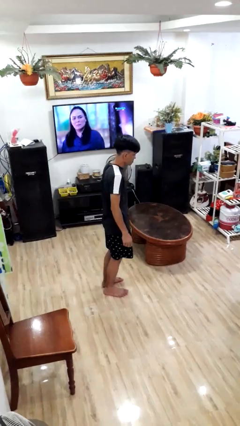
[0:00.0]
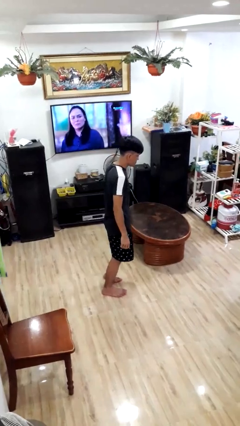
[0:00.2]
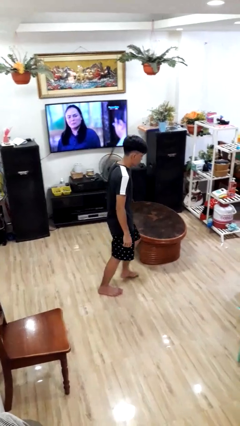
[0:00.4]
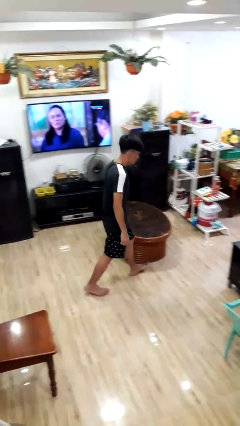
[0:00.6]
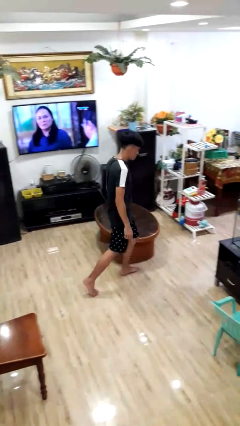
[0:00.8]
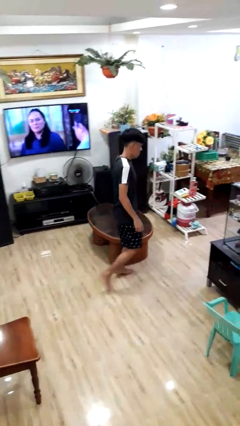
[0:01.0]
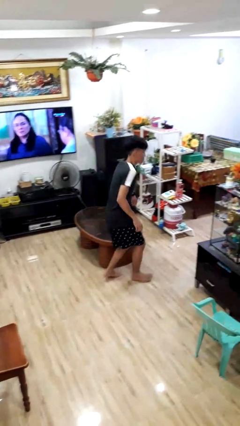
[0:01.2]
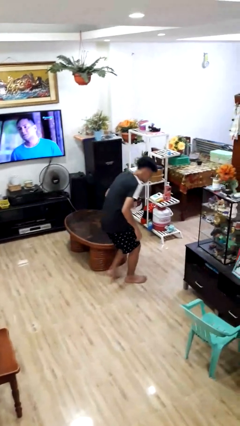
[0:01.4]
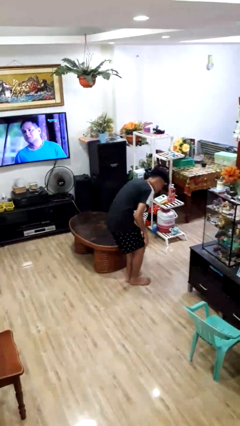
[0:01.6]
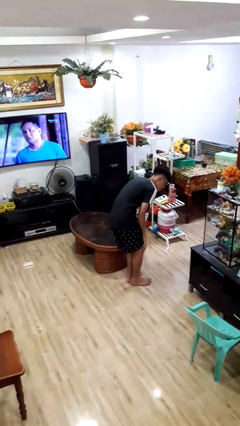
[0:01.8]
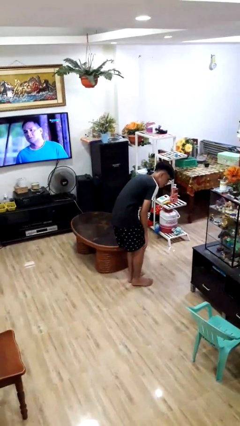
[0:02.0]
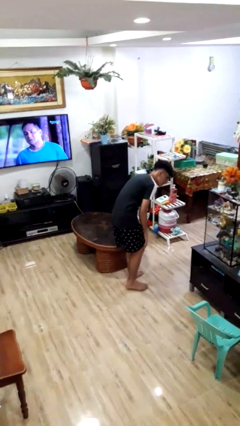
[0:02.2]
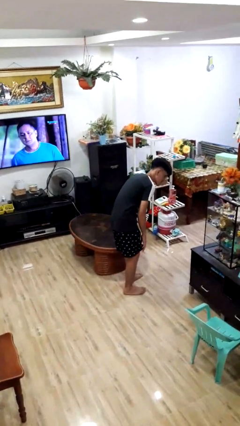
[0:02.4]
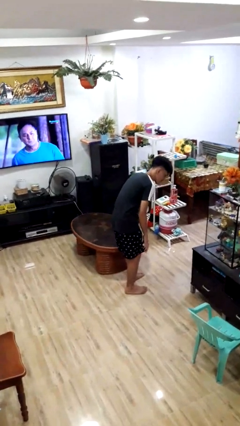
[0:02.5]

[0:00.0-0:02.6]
person bumps into table

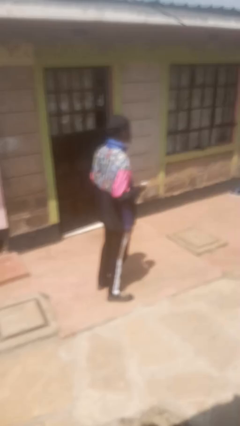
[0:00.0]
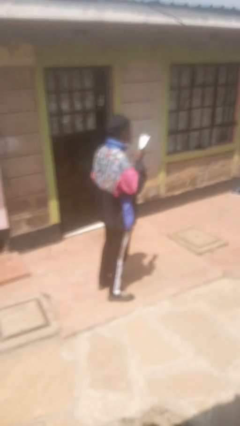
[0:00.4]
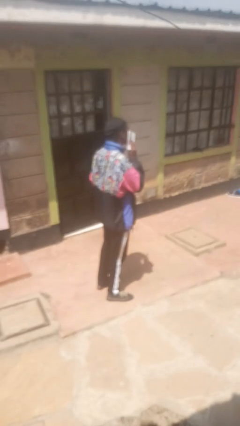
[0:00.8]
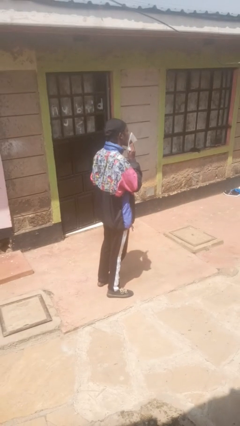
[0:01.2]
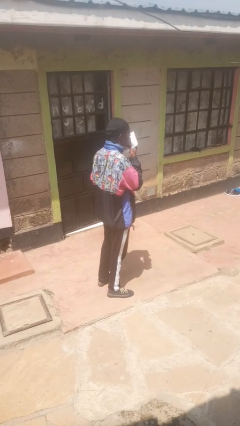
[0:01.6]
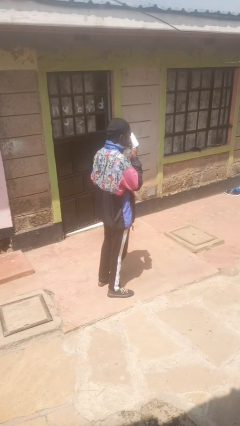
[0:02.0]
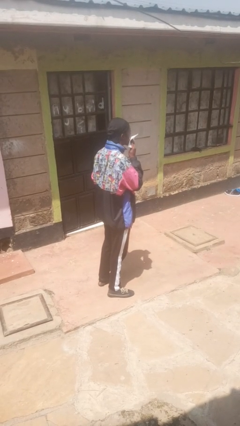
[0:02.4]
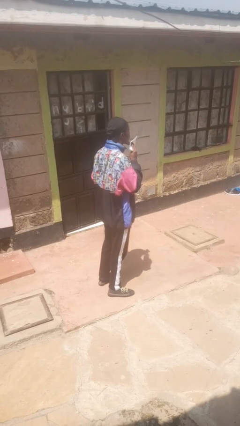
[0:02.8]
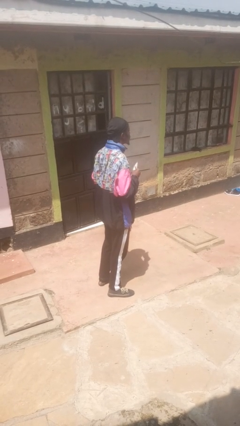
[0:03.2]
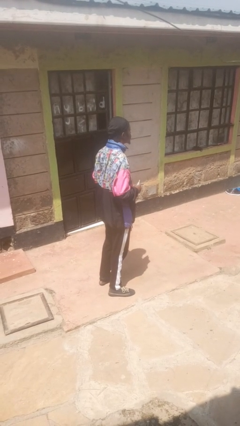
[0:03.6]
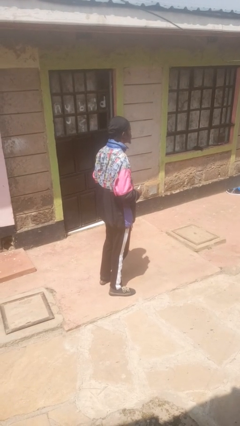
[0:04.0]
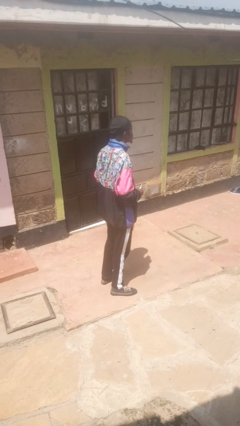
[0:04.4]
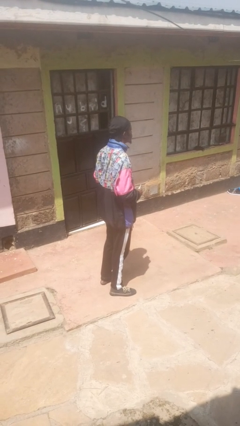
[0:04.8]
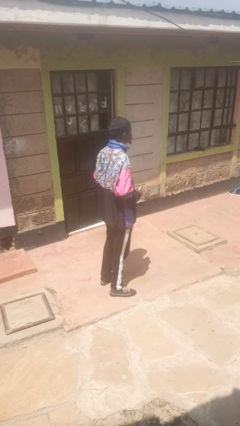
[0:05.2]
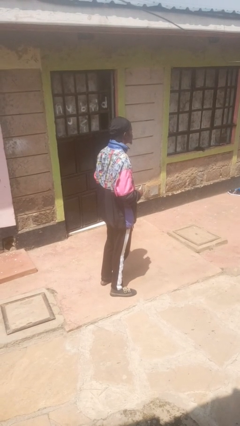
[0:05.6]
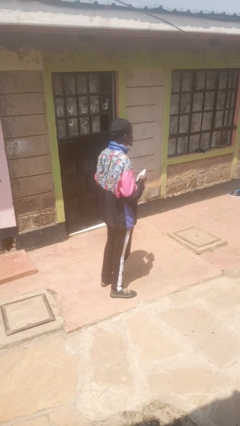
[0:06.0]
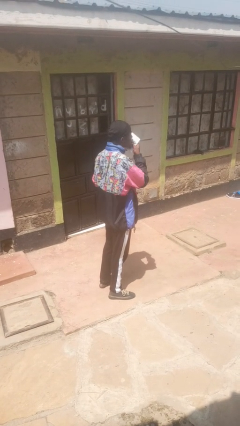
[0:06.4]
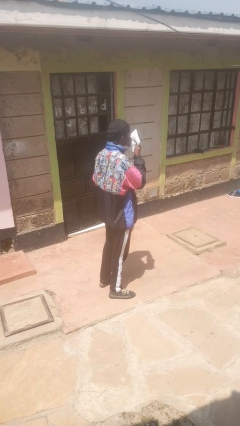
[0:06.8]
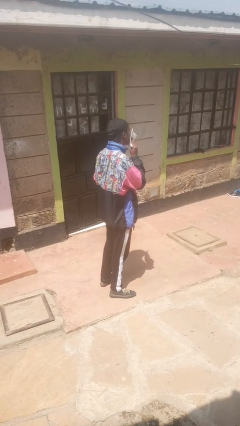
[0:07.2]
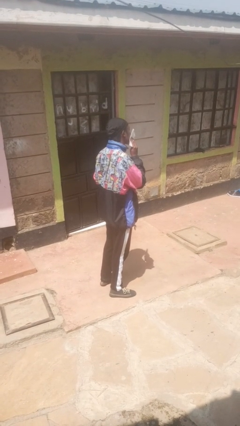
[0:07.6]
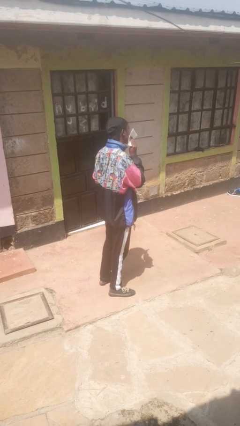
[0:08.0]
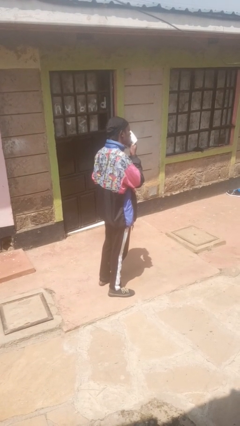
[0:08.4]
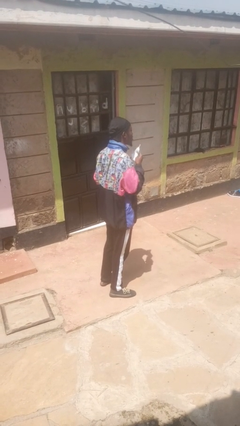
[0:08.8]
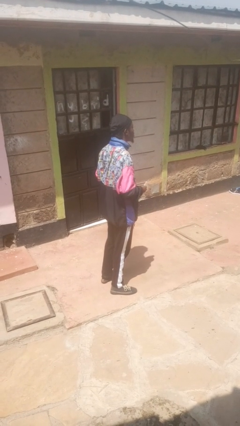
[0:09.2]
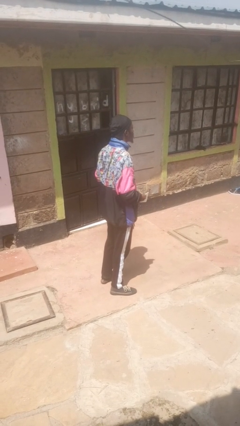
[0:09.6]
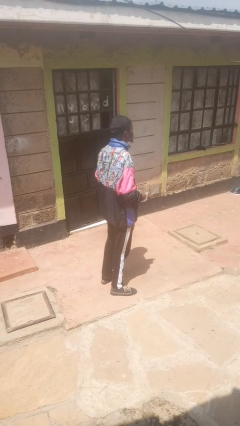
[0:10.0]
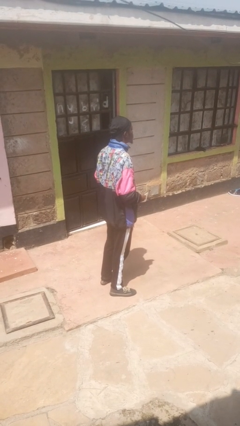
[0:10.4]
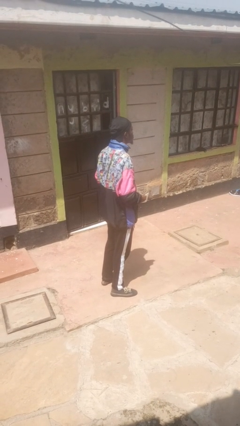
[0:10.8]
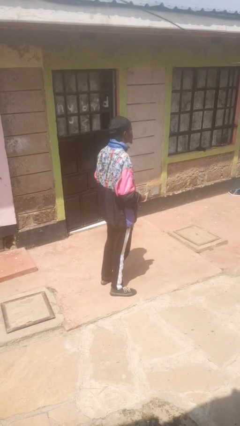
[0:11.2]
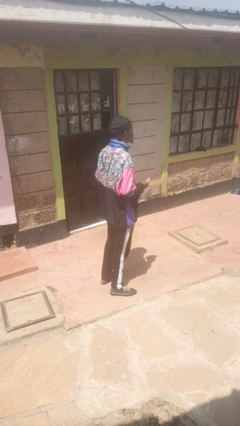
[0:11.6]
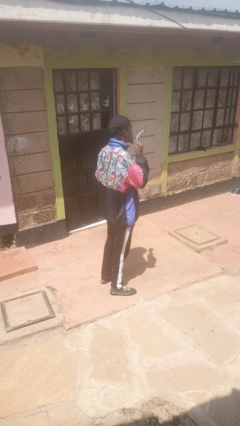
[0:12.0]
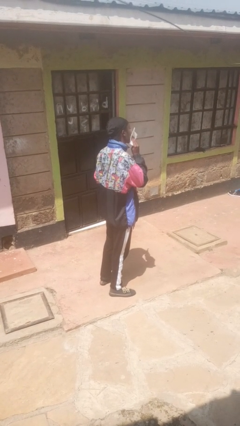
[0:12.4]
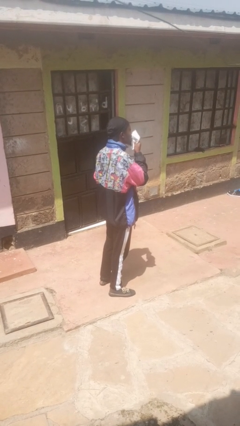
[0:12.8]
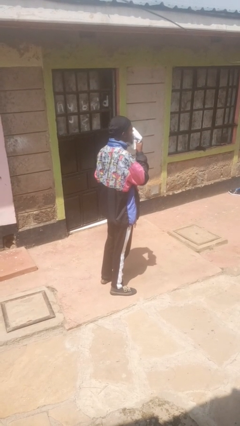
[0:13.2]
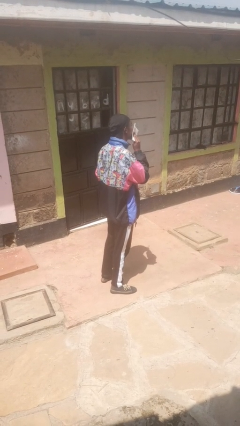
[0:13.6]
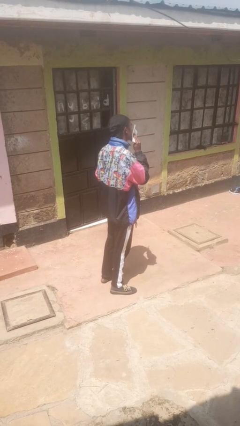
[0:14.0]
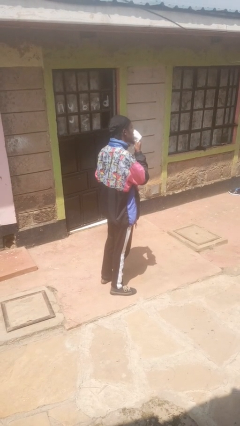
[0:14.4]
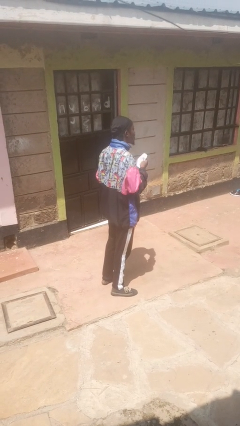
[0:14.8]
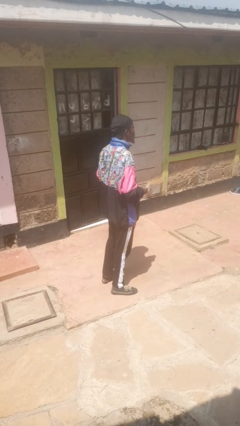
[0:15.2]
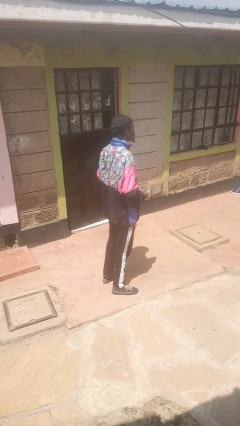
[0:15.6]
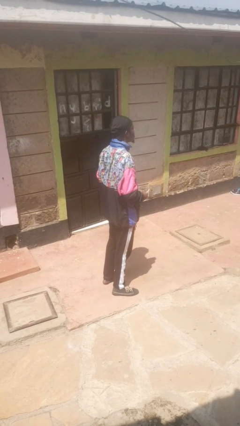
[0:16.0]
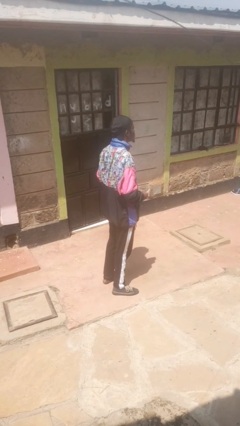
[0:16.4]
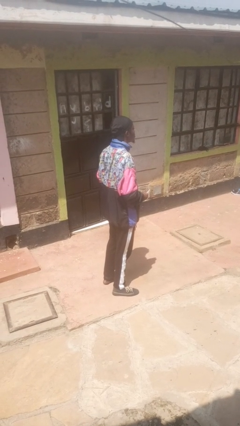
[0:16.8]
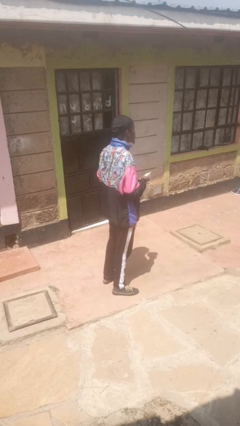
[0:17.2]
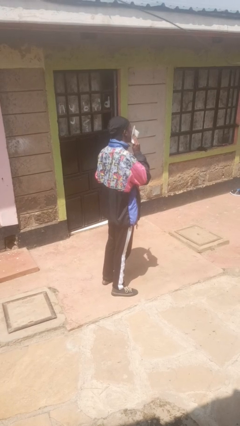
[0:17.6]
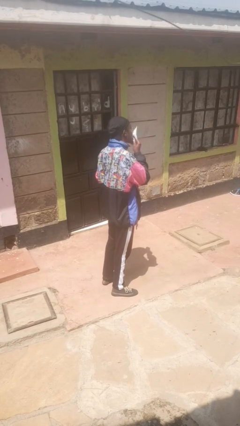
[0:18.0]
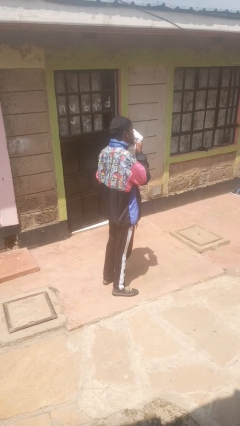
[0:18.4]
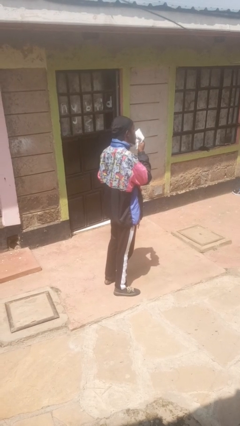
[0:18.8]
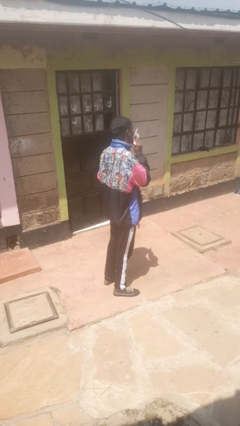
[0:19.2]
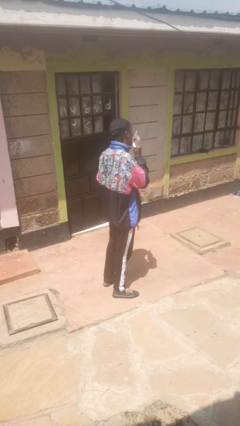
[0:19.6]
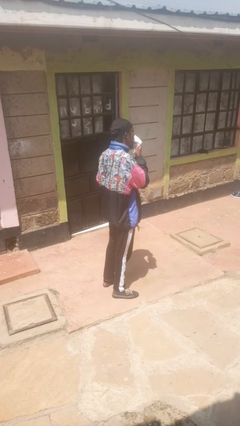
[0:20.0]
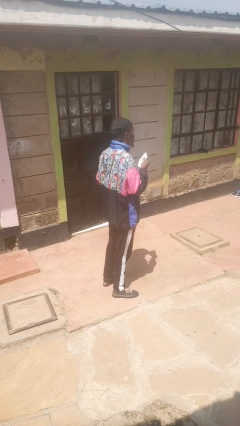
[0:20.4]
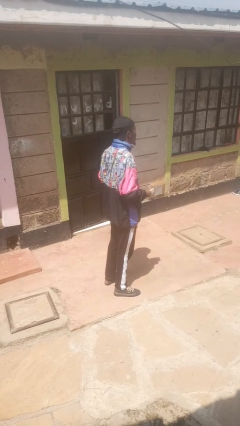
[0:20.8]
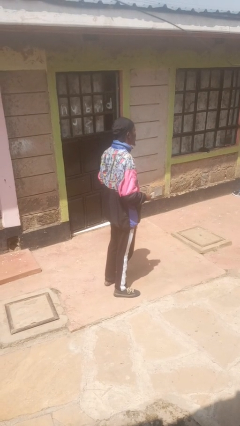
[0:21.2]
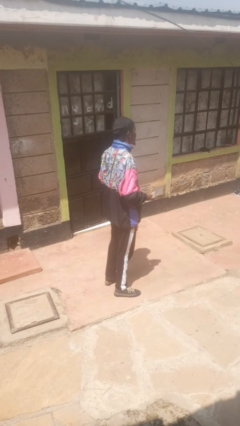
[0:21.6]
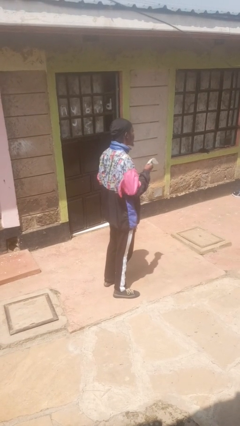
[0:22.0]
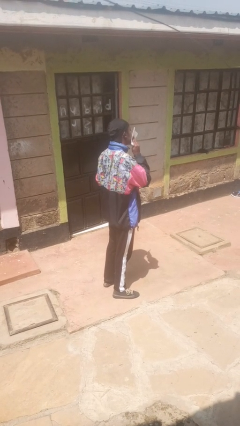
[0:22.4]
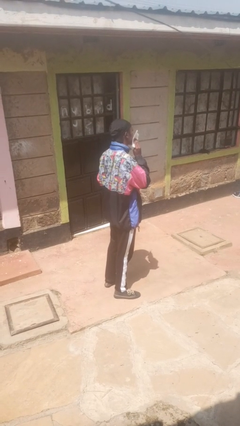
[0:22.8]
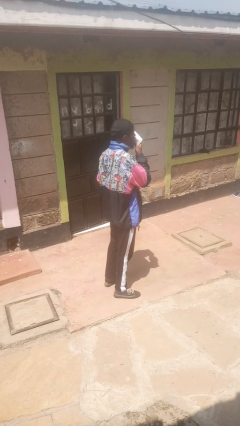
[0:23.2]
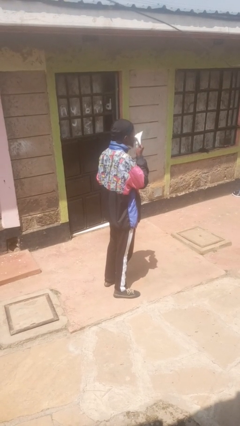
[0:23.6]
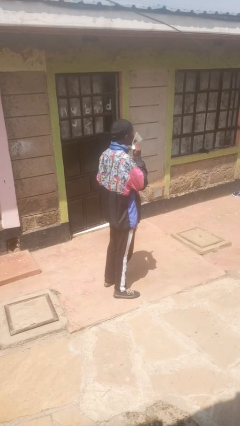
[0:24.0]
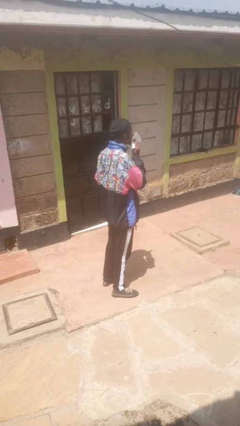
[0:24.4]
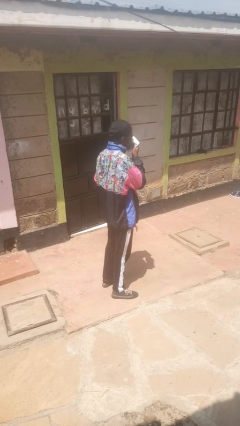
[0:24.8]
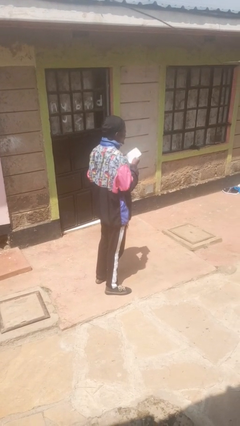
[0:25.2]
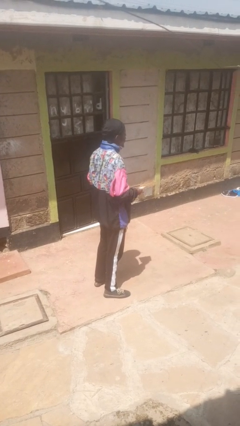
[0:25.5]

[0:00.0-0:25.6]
person wipes mouth with napkin

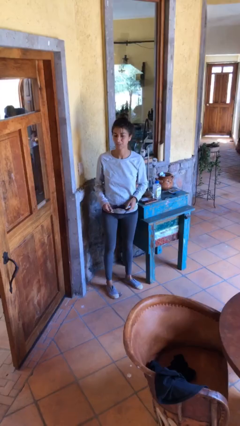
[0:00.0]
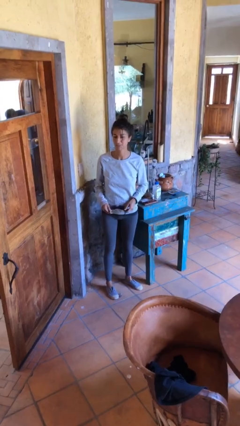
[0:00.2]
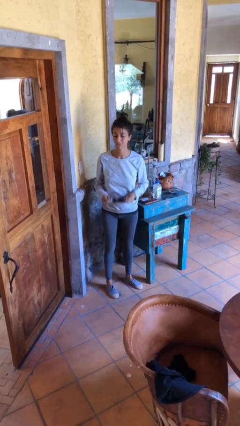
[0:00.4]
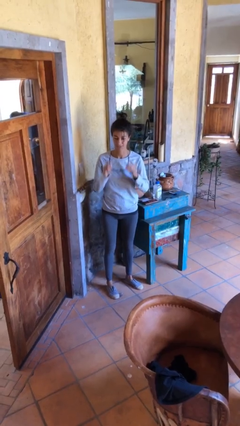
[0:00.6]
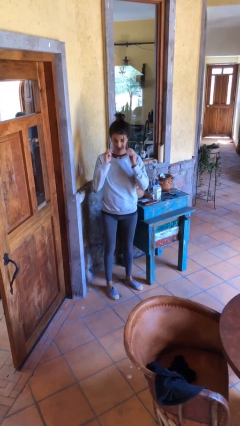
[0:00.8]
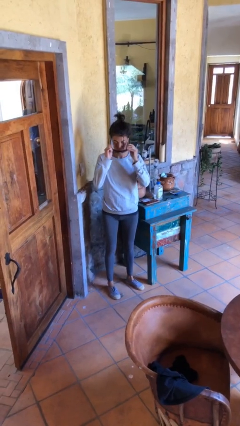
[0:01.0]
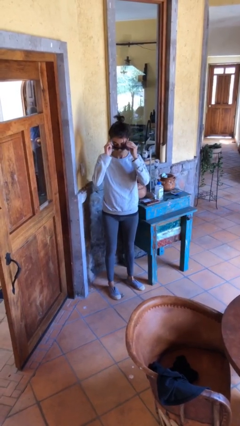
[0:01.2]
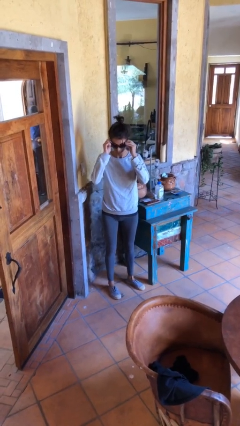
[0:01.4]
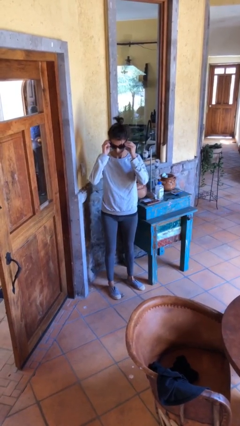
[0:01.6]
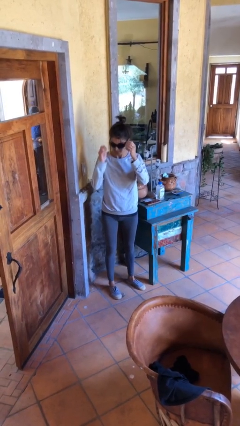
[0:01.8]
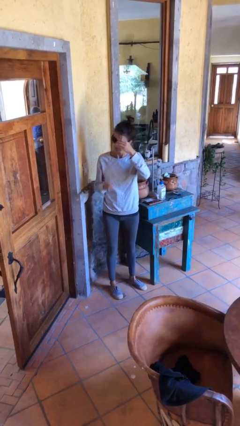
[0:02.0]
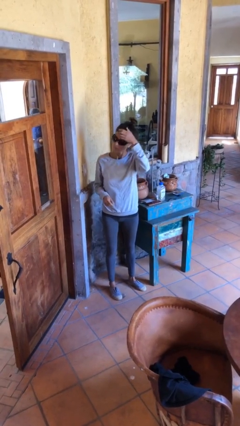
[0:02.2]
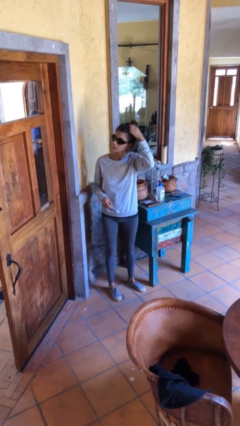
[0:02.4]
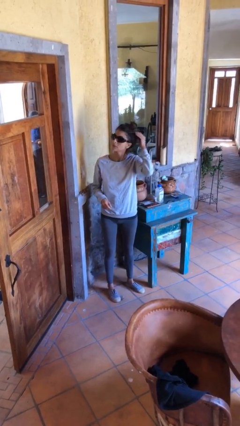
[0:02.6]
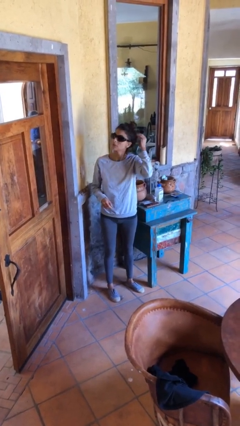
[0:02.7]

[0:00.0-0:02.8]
person puts on sunglasses
